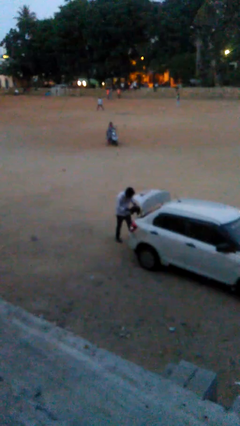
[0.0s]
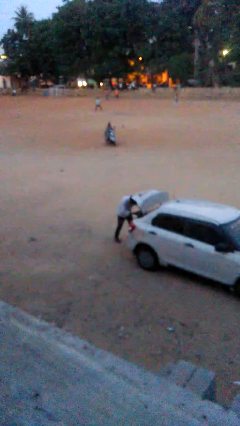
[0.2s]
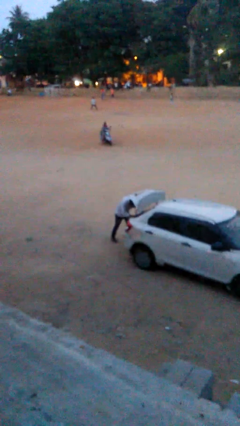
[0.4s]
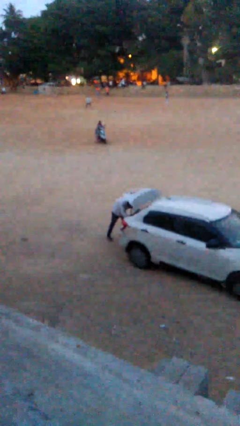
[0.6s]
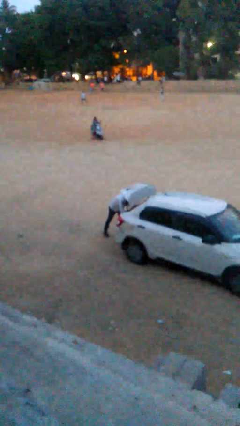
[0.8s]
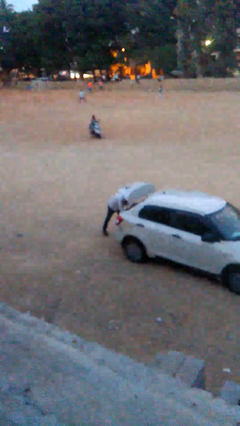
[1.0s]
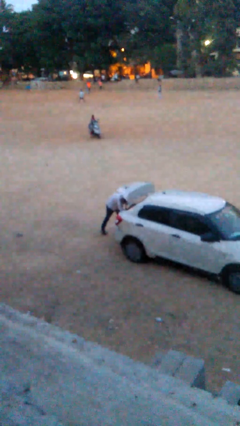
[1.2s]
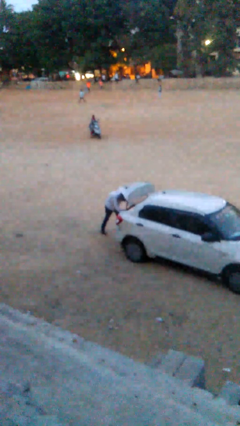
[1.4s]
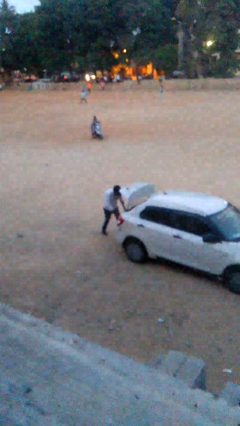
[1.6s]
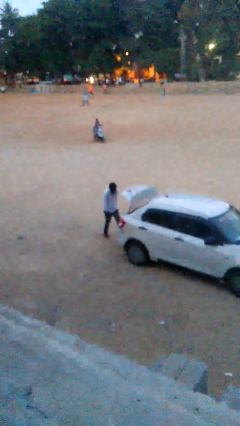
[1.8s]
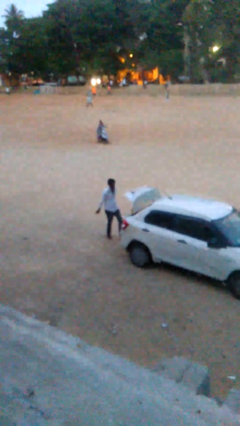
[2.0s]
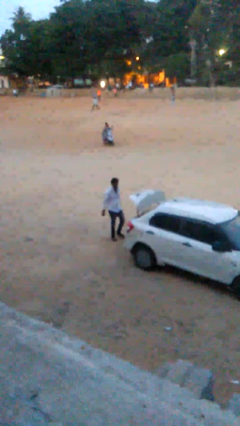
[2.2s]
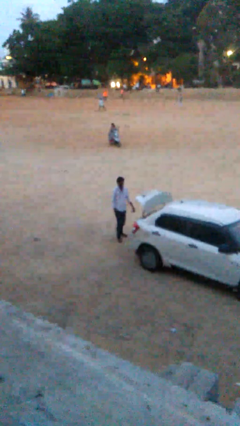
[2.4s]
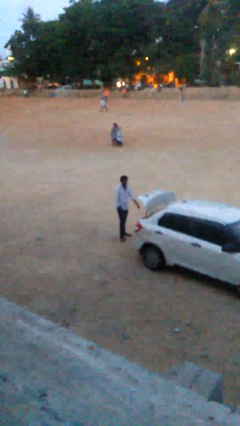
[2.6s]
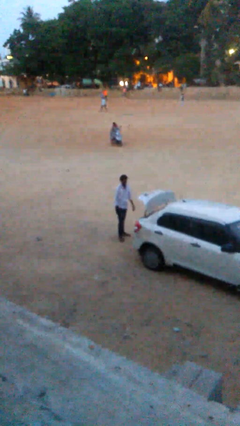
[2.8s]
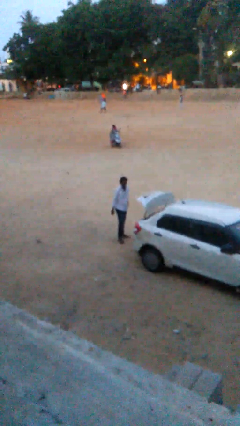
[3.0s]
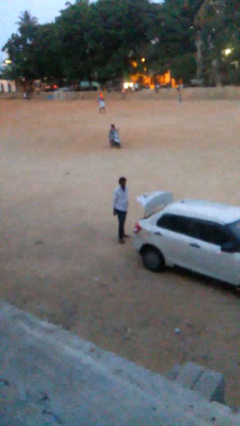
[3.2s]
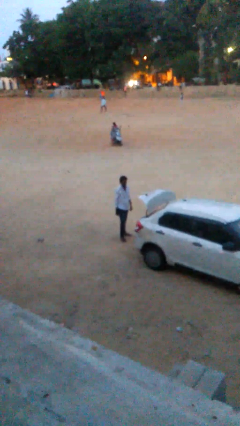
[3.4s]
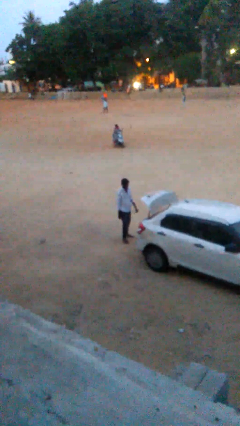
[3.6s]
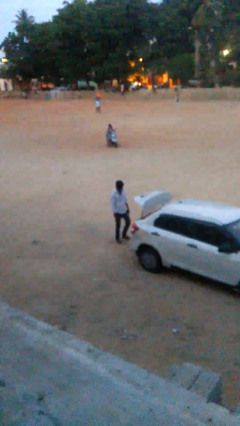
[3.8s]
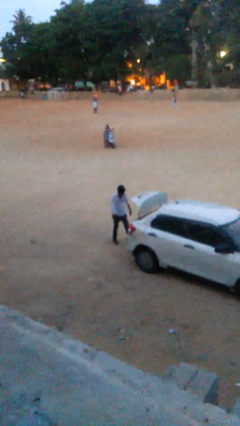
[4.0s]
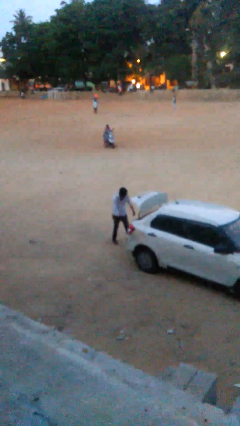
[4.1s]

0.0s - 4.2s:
person loads car

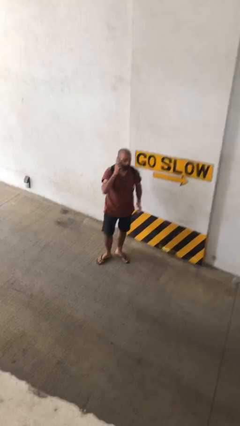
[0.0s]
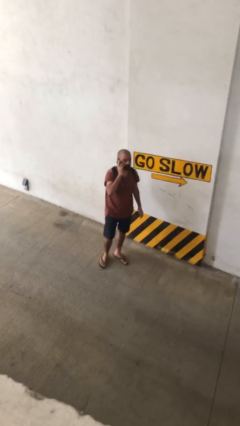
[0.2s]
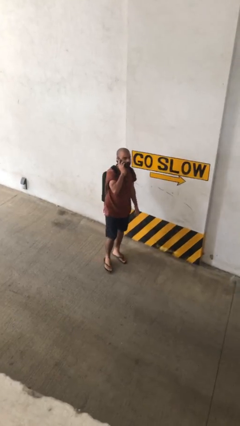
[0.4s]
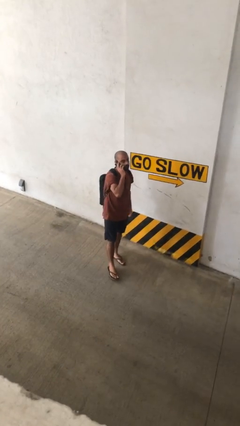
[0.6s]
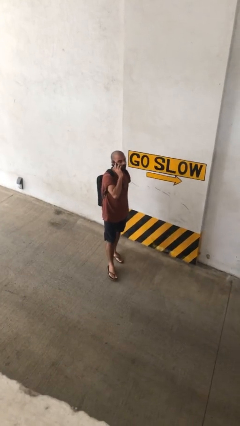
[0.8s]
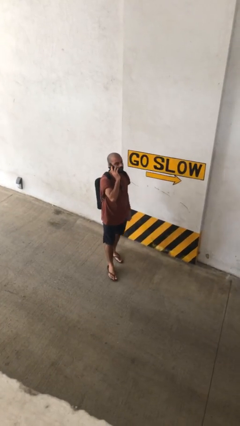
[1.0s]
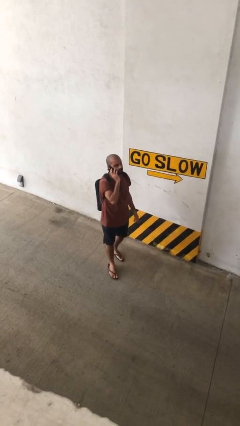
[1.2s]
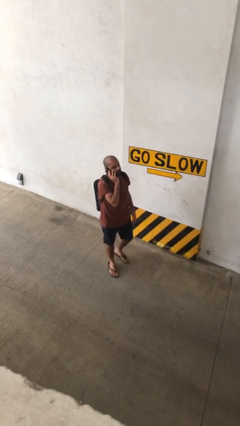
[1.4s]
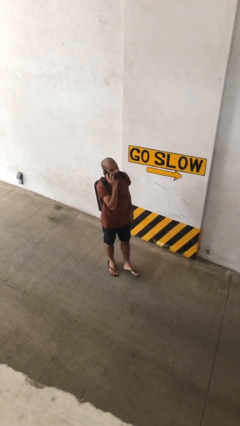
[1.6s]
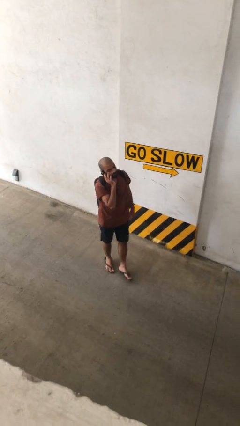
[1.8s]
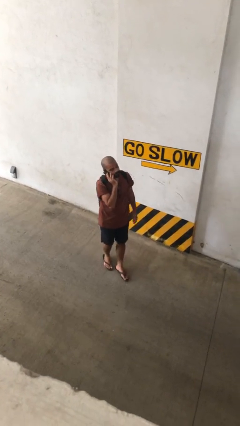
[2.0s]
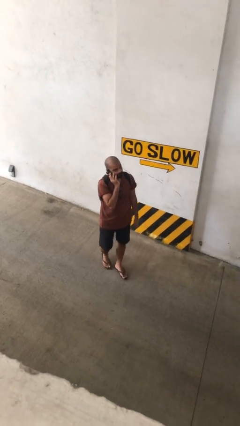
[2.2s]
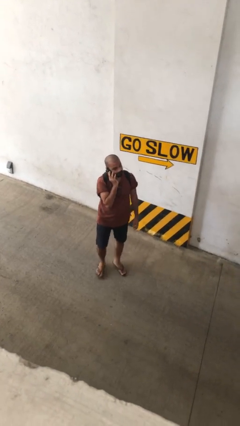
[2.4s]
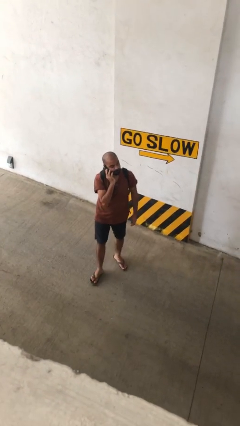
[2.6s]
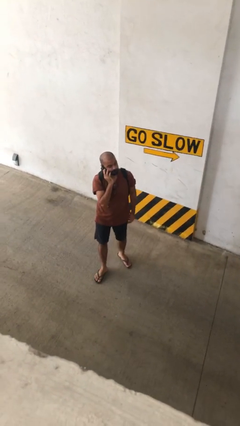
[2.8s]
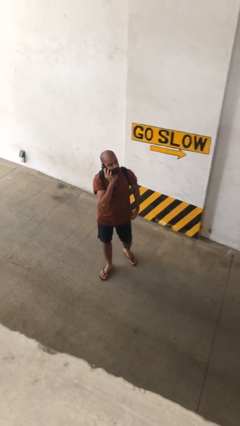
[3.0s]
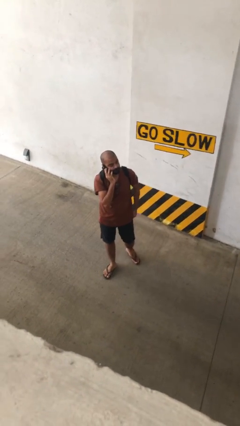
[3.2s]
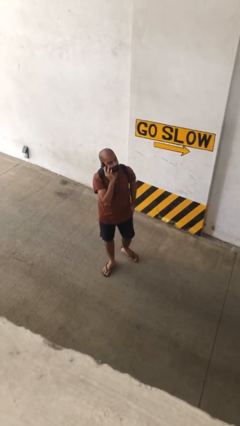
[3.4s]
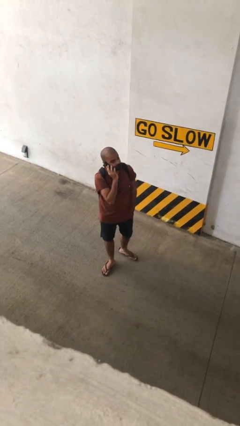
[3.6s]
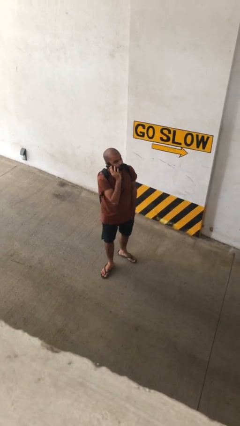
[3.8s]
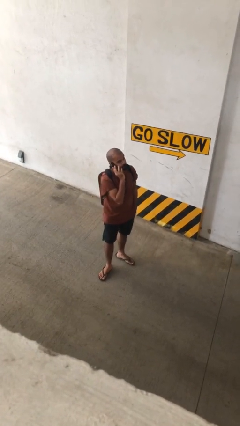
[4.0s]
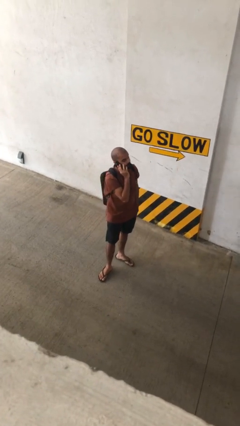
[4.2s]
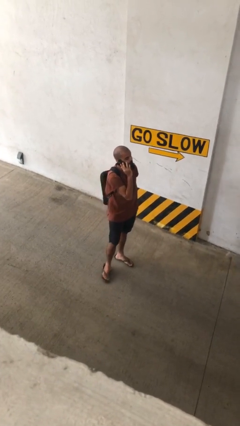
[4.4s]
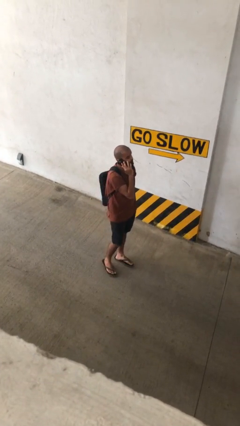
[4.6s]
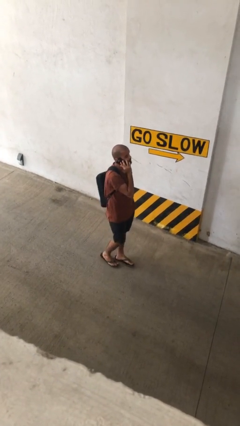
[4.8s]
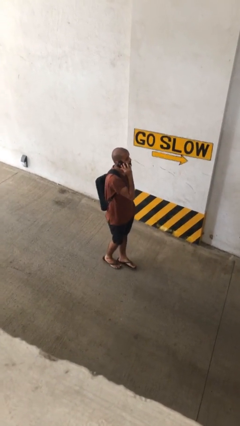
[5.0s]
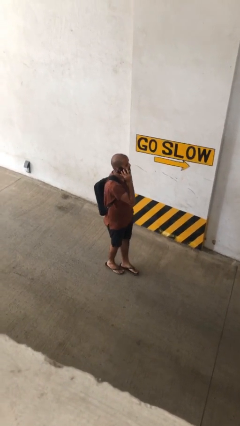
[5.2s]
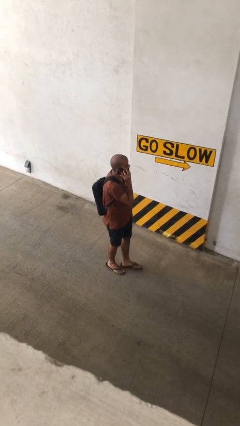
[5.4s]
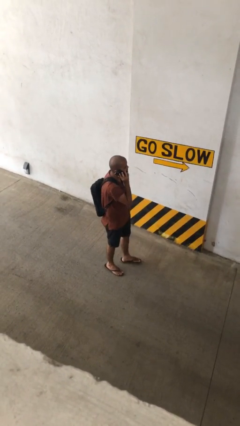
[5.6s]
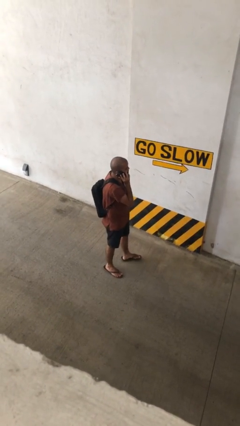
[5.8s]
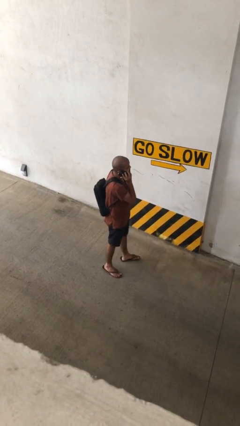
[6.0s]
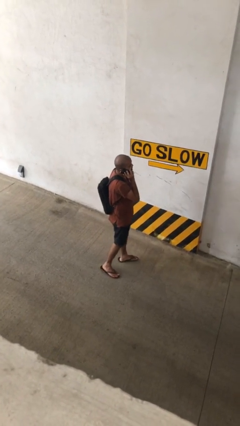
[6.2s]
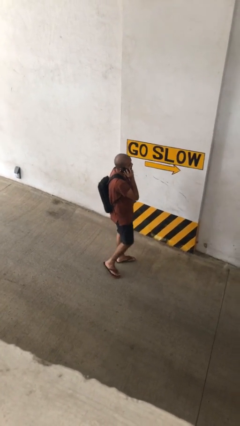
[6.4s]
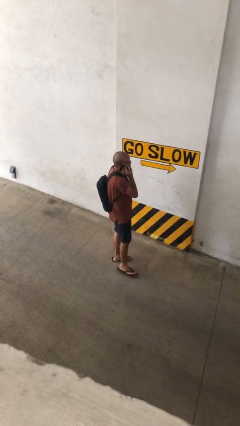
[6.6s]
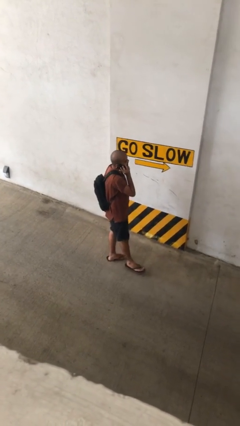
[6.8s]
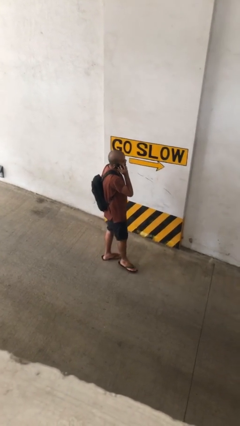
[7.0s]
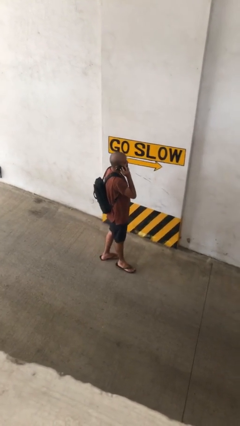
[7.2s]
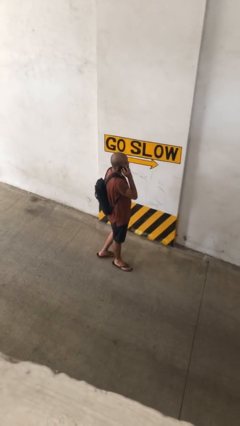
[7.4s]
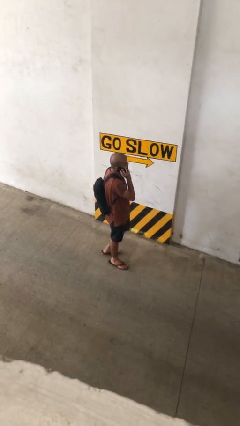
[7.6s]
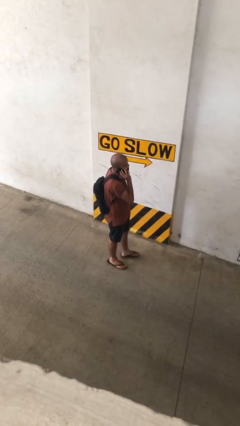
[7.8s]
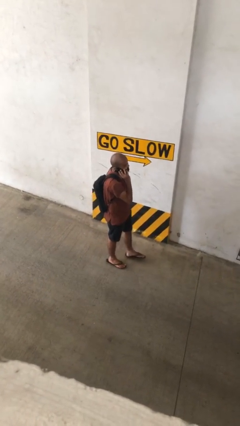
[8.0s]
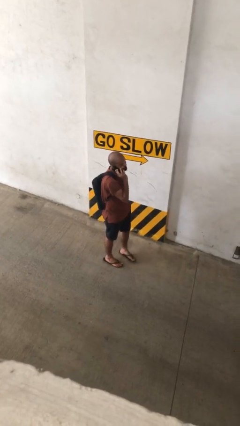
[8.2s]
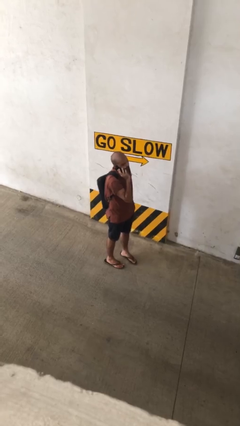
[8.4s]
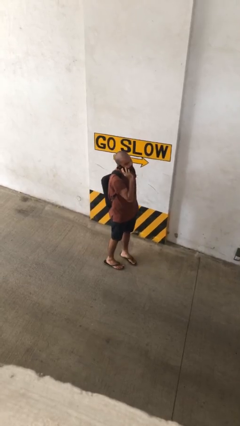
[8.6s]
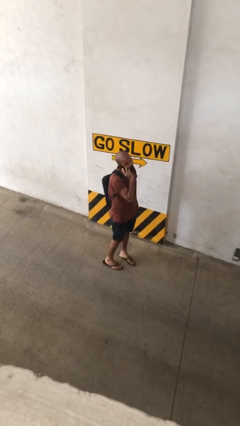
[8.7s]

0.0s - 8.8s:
person talks on phone

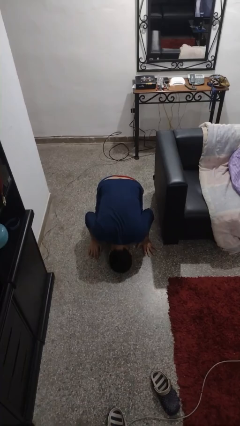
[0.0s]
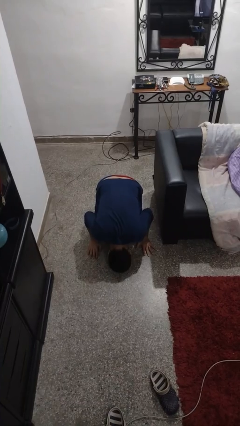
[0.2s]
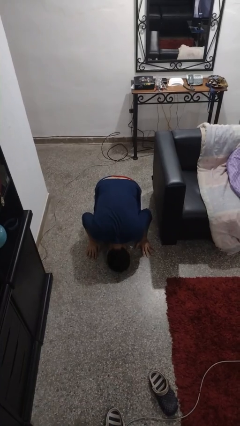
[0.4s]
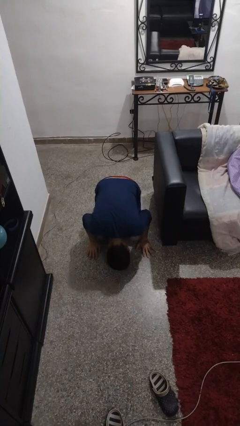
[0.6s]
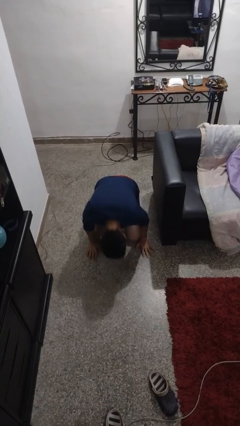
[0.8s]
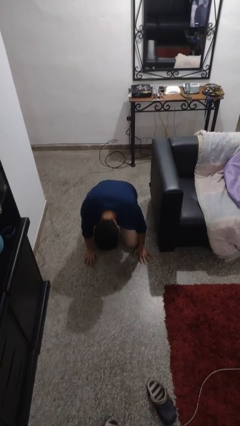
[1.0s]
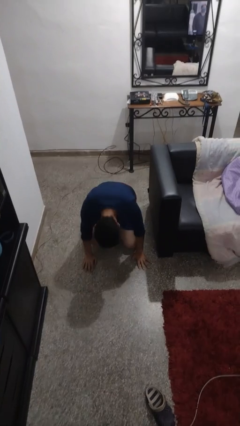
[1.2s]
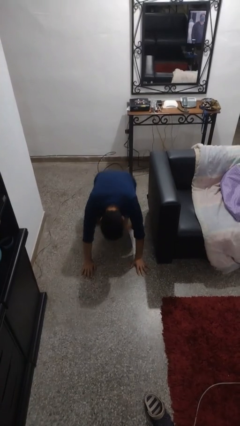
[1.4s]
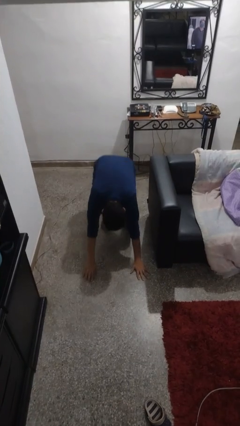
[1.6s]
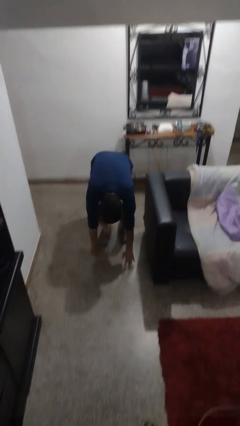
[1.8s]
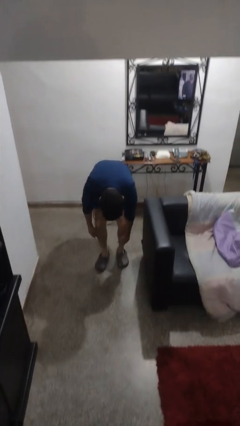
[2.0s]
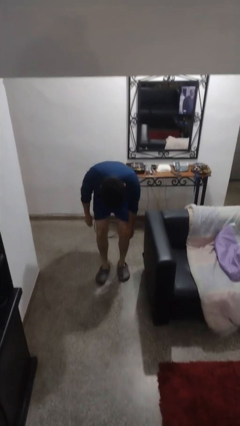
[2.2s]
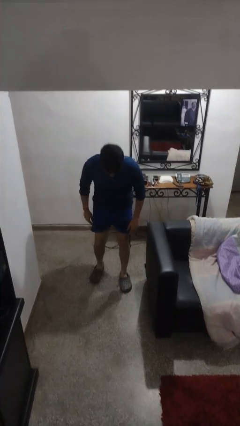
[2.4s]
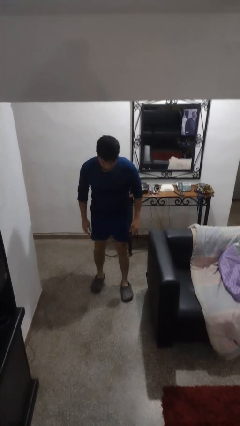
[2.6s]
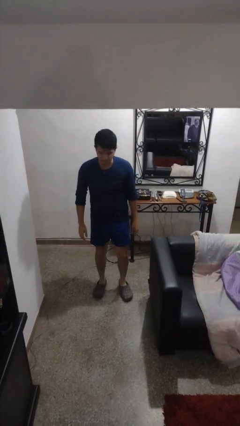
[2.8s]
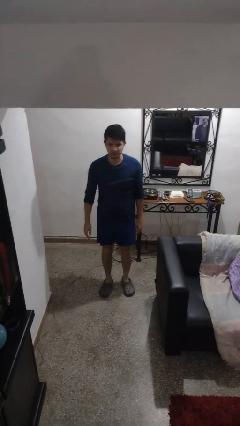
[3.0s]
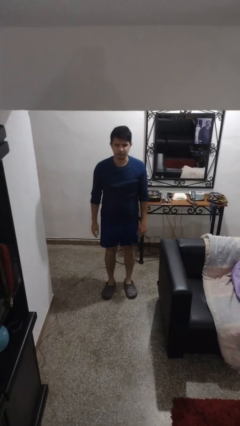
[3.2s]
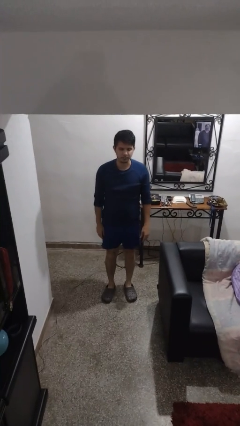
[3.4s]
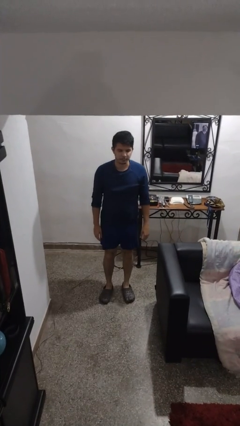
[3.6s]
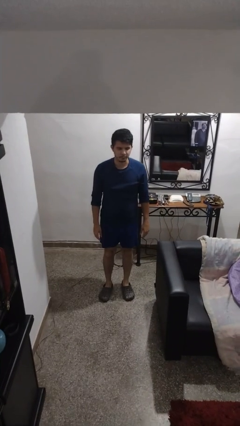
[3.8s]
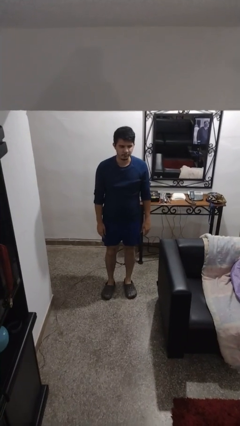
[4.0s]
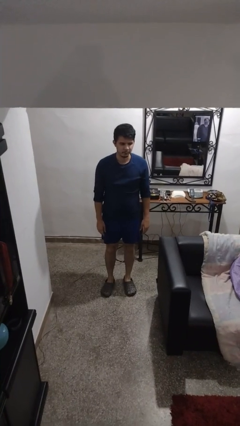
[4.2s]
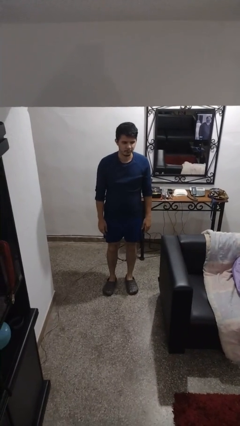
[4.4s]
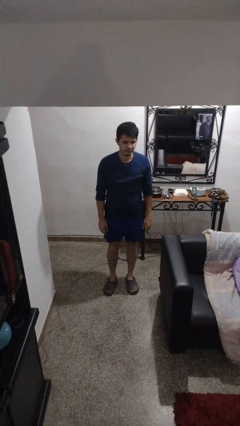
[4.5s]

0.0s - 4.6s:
person stands up from floor

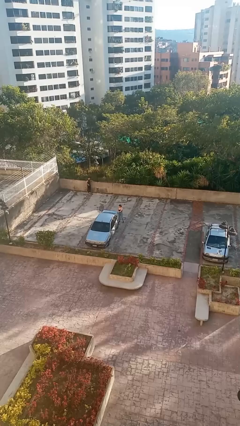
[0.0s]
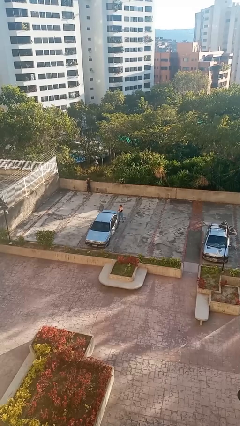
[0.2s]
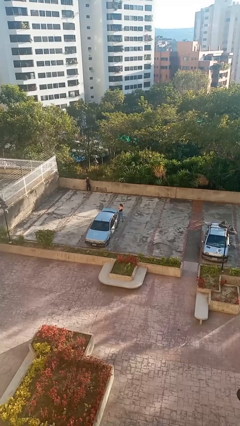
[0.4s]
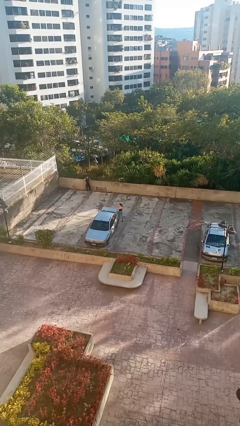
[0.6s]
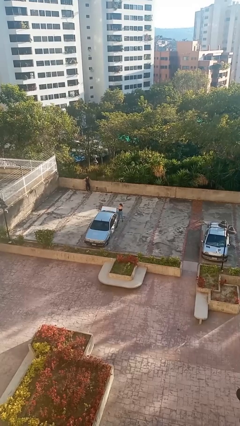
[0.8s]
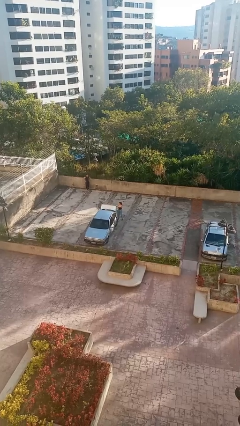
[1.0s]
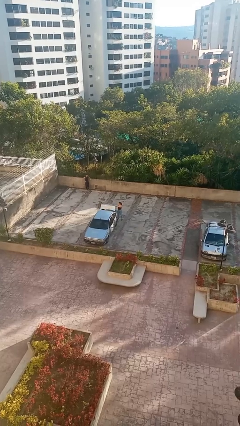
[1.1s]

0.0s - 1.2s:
person opens car trunk
